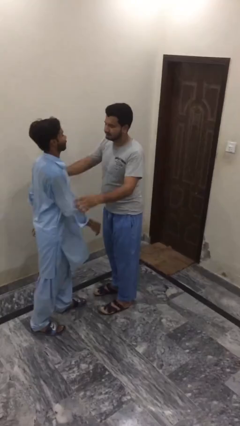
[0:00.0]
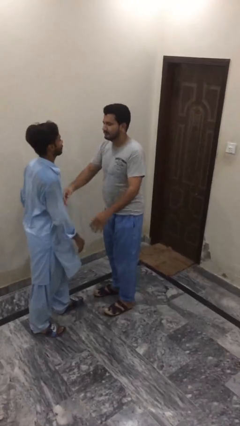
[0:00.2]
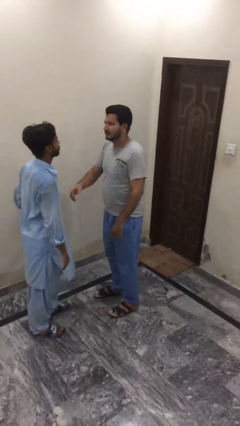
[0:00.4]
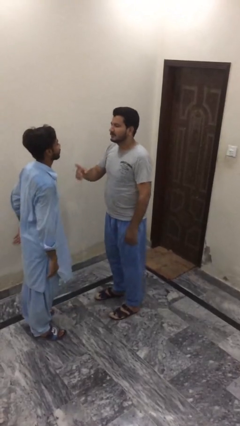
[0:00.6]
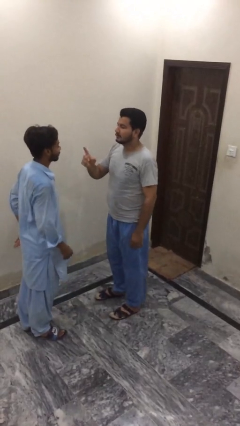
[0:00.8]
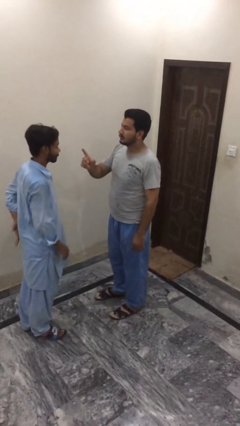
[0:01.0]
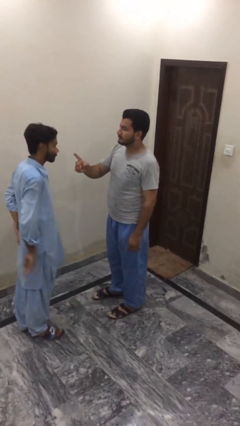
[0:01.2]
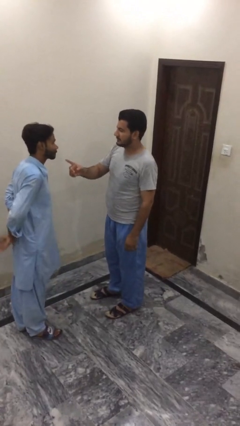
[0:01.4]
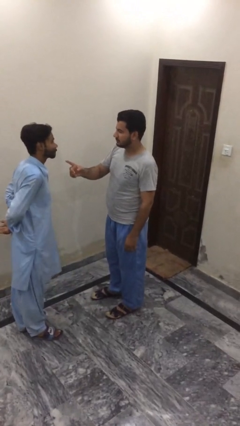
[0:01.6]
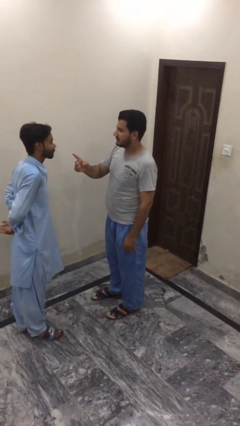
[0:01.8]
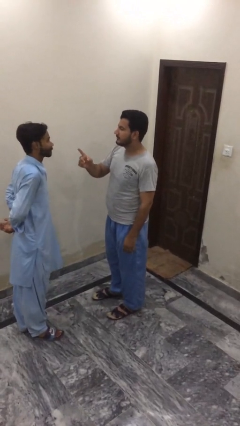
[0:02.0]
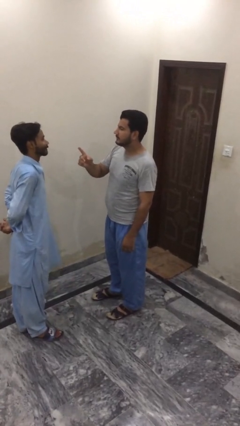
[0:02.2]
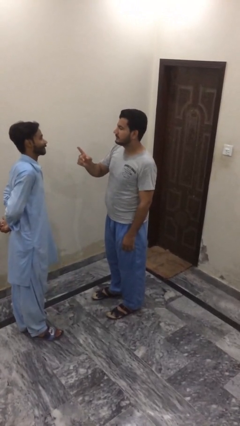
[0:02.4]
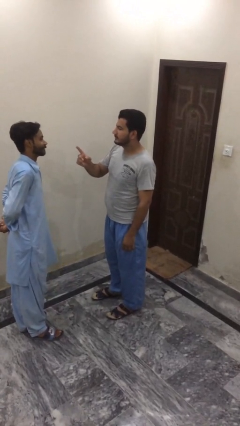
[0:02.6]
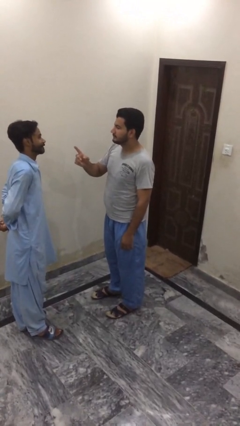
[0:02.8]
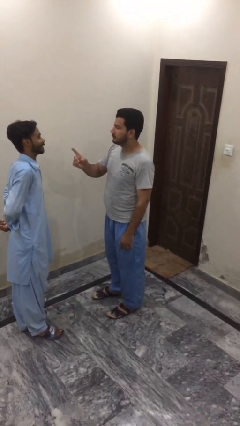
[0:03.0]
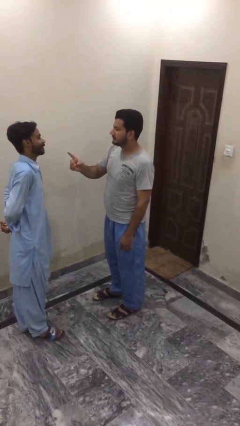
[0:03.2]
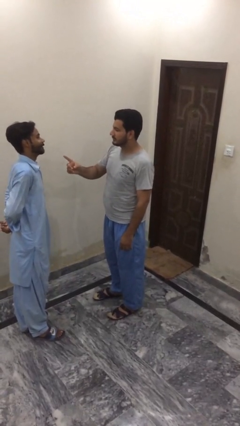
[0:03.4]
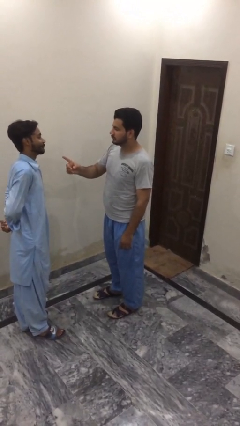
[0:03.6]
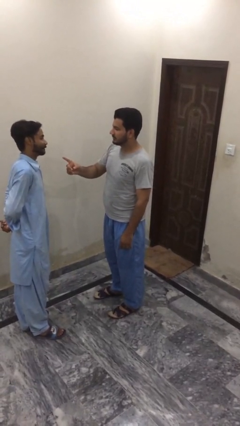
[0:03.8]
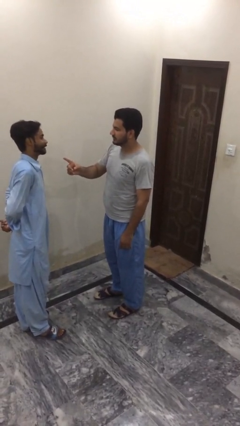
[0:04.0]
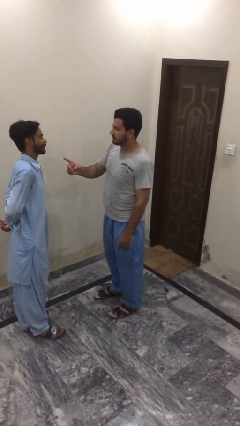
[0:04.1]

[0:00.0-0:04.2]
person talks to person

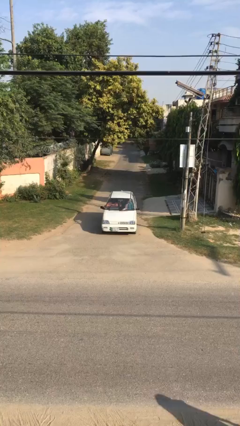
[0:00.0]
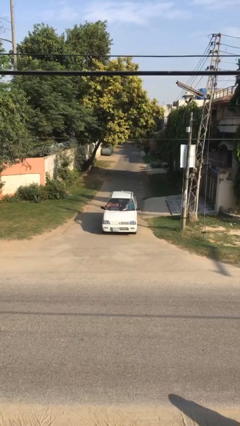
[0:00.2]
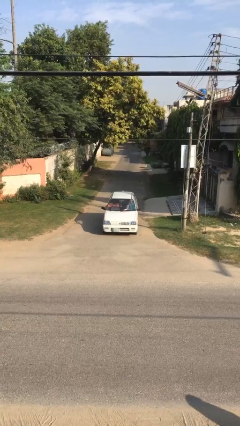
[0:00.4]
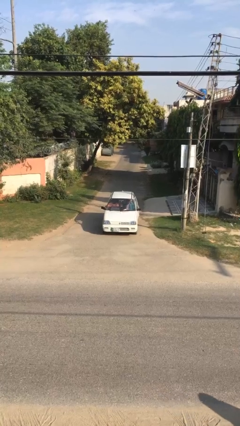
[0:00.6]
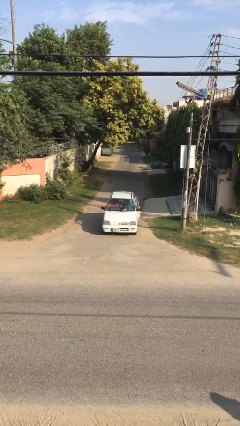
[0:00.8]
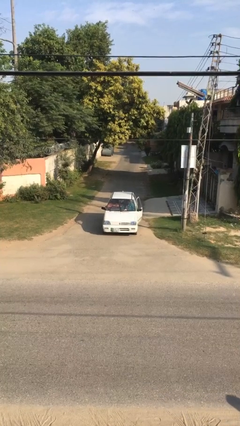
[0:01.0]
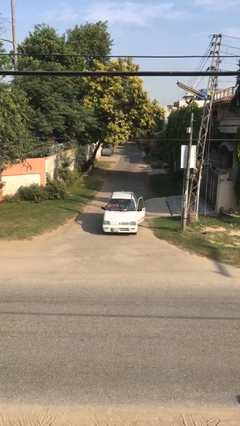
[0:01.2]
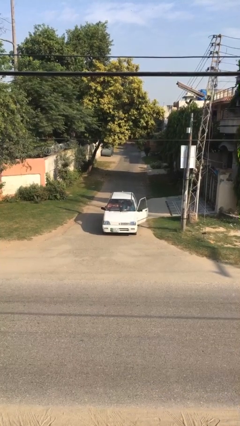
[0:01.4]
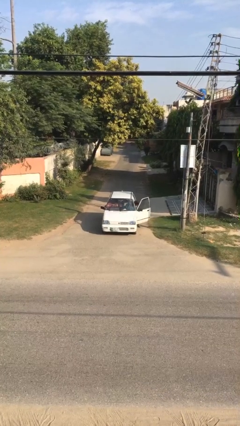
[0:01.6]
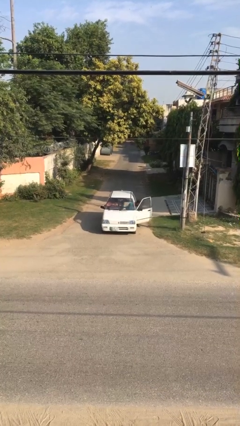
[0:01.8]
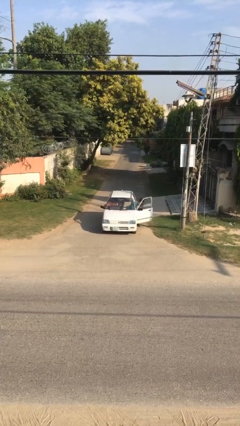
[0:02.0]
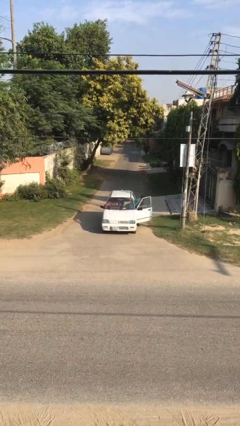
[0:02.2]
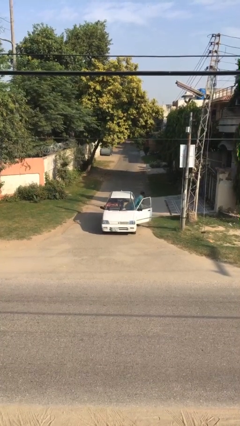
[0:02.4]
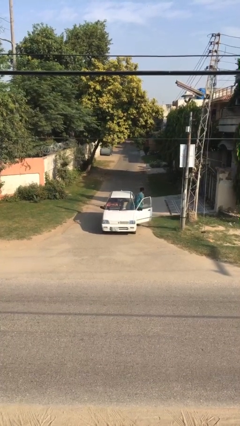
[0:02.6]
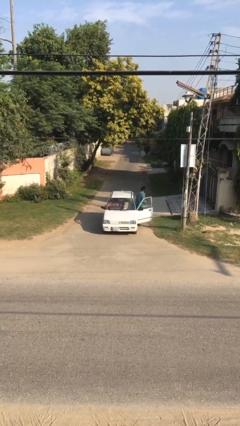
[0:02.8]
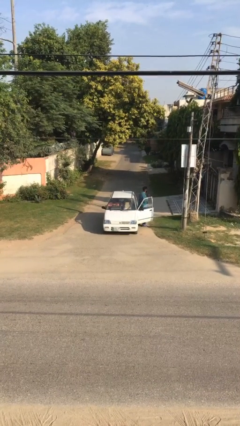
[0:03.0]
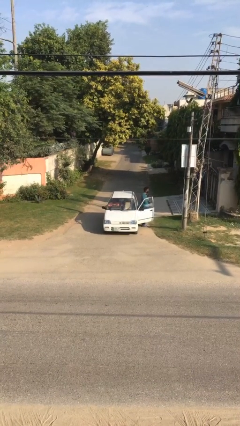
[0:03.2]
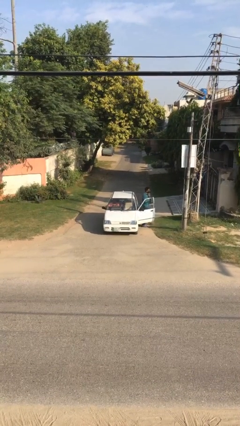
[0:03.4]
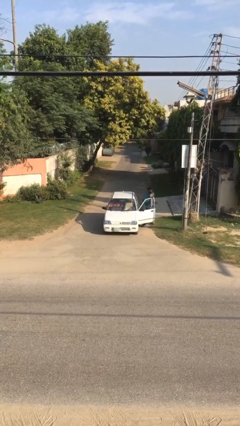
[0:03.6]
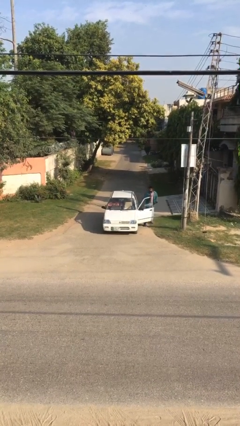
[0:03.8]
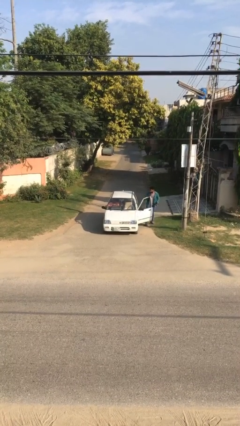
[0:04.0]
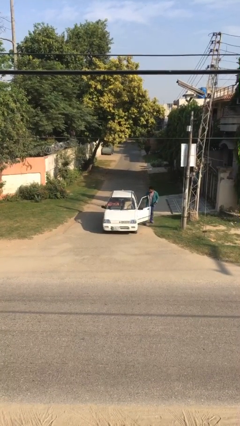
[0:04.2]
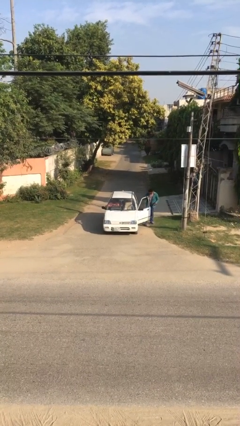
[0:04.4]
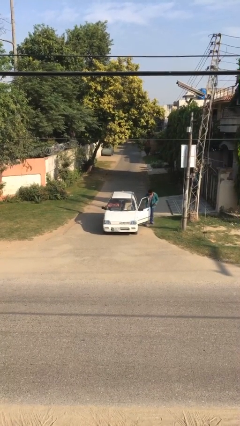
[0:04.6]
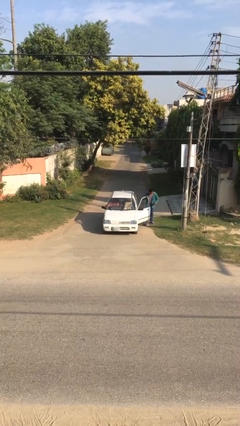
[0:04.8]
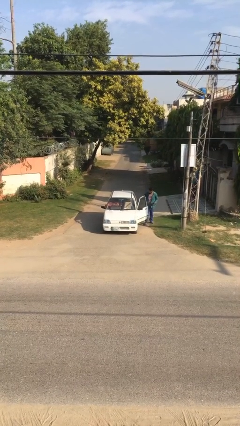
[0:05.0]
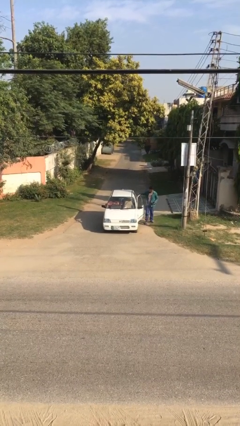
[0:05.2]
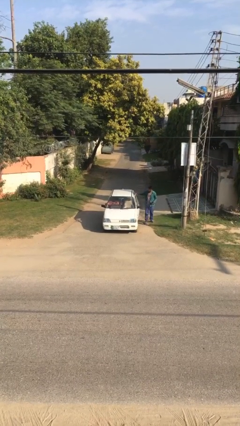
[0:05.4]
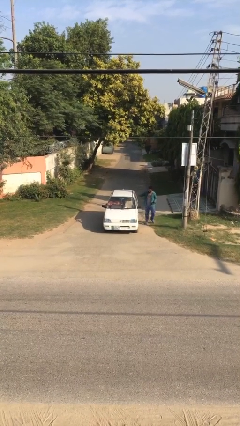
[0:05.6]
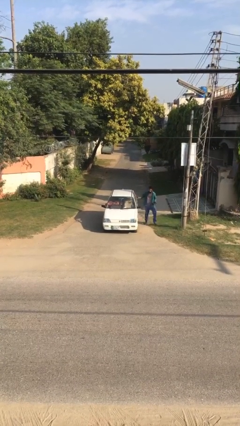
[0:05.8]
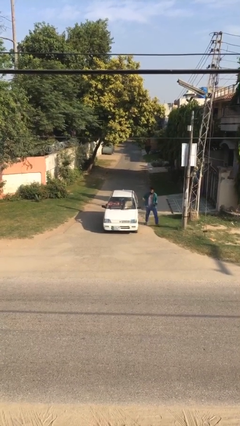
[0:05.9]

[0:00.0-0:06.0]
car drops off person

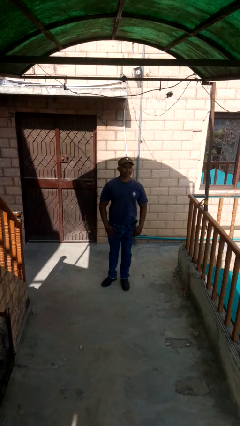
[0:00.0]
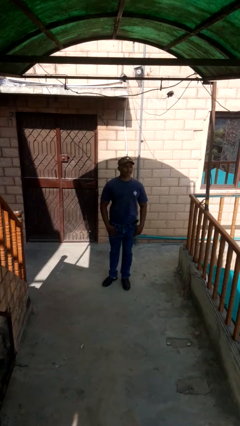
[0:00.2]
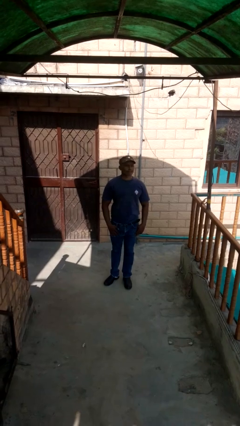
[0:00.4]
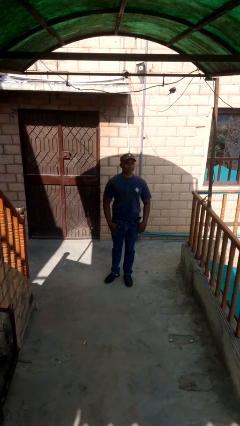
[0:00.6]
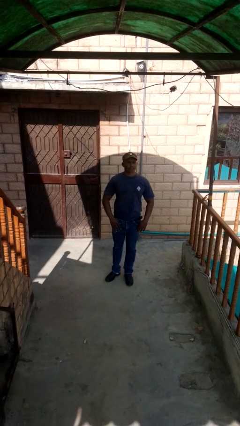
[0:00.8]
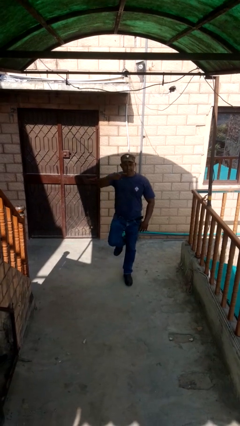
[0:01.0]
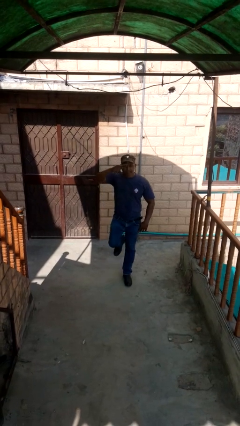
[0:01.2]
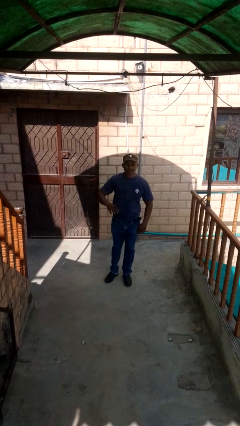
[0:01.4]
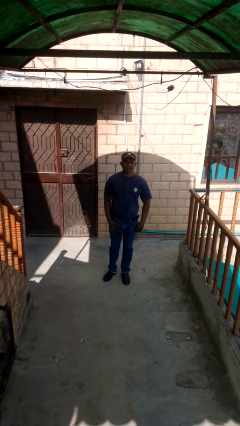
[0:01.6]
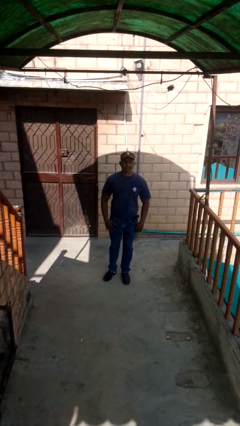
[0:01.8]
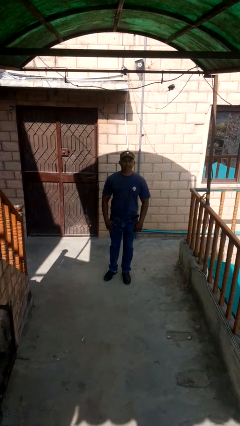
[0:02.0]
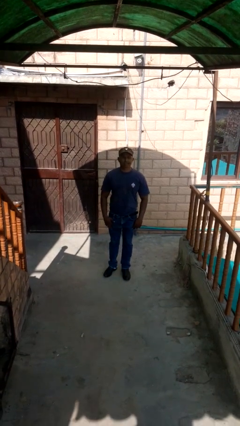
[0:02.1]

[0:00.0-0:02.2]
person salutes

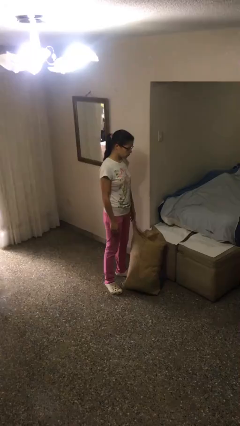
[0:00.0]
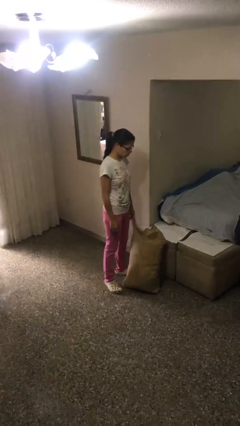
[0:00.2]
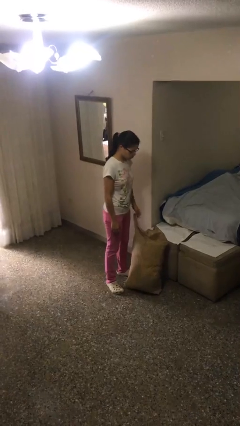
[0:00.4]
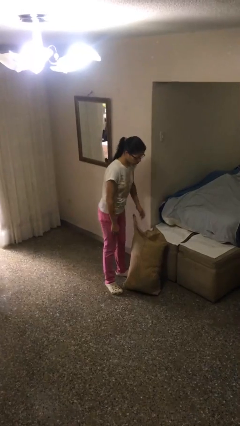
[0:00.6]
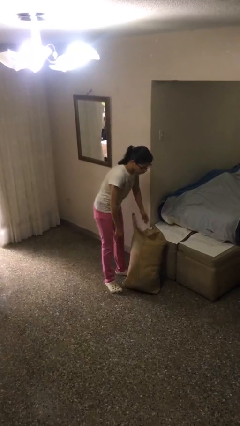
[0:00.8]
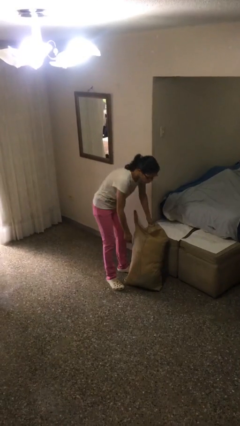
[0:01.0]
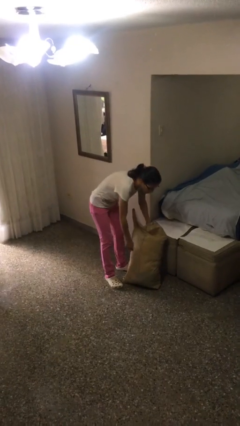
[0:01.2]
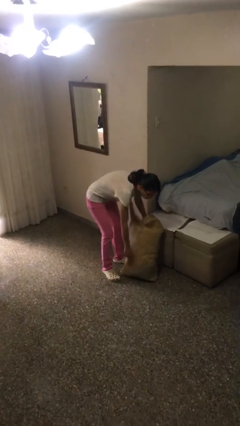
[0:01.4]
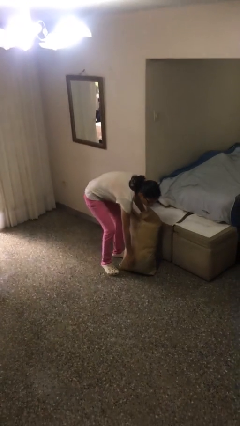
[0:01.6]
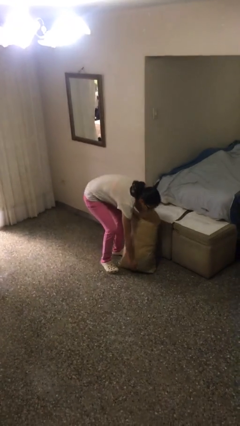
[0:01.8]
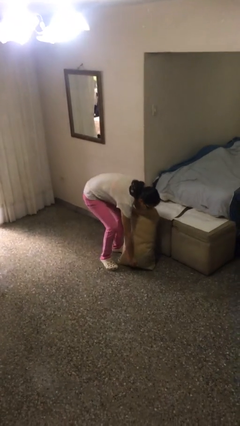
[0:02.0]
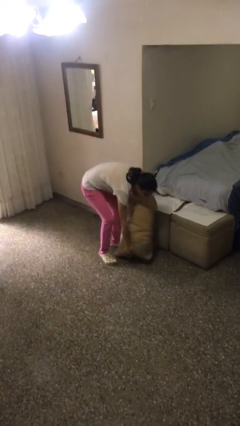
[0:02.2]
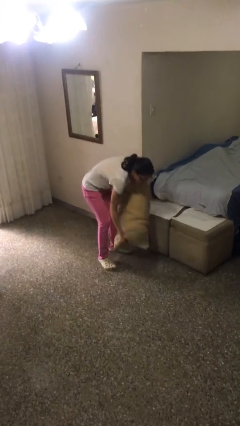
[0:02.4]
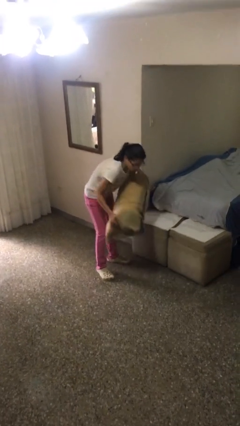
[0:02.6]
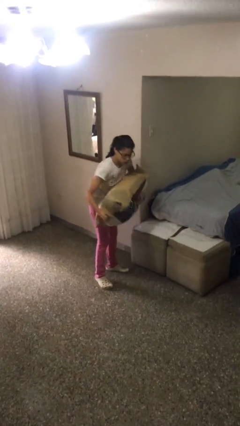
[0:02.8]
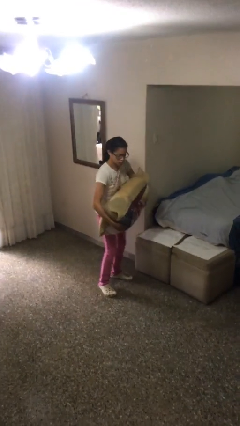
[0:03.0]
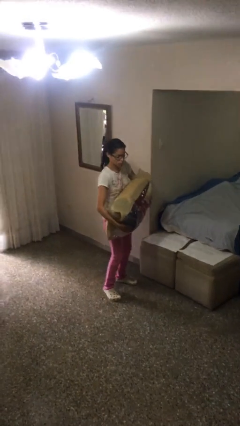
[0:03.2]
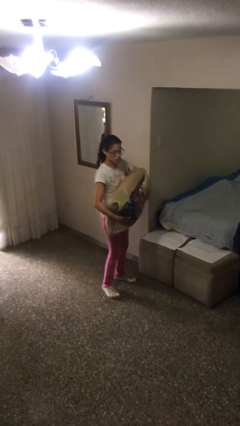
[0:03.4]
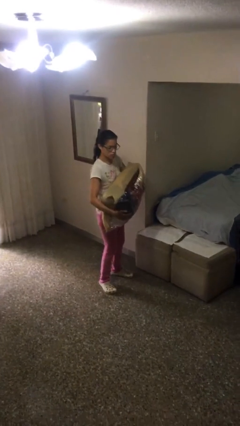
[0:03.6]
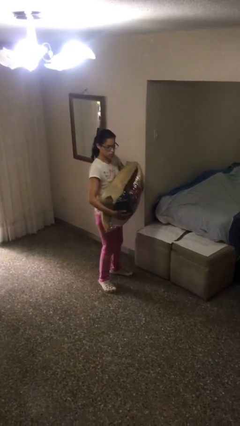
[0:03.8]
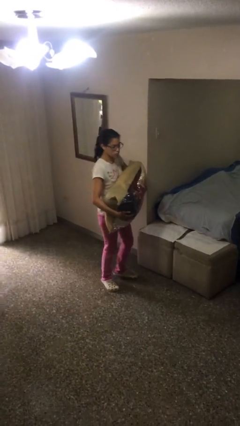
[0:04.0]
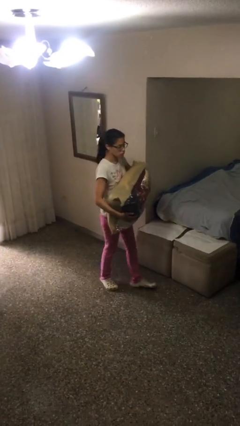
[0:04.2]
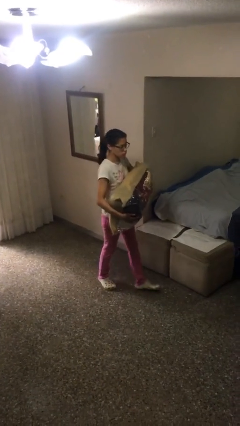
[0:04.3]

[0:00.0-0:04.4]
person picks up object from floor

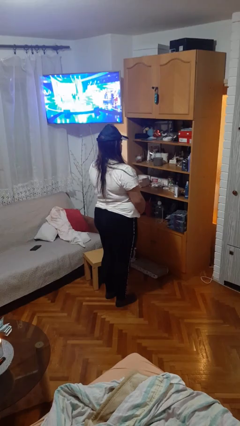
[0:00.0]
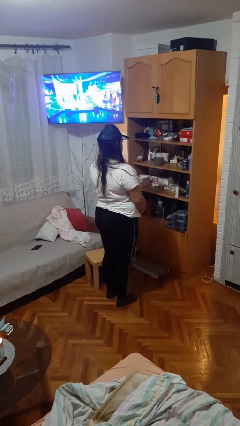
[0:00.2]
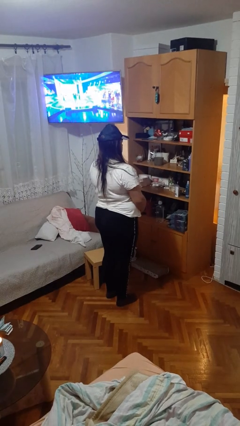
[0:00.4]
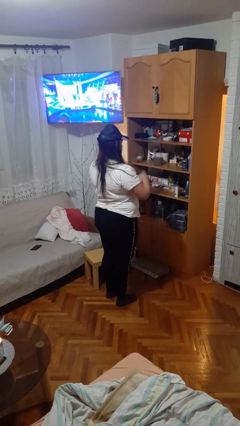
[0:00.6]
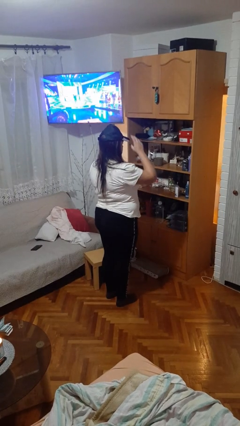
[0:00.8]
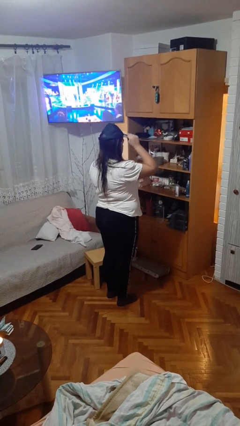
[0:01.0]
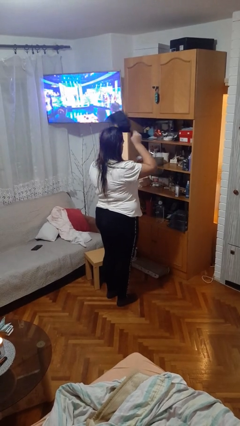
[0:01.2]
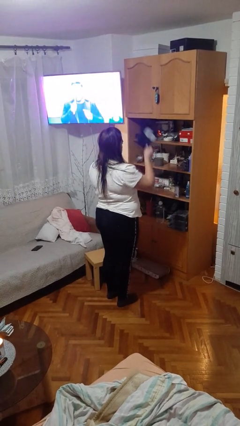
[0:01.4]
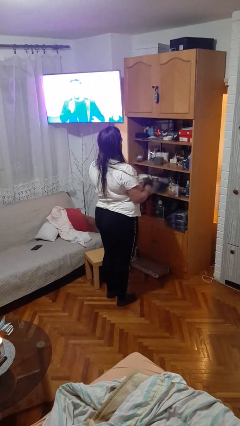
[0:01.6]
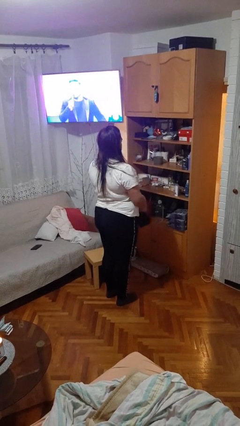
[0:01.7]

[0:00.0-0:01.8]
person takes off hat
